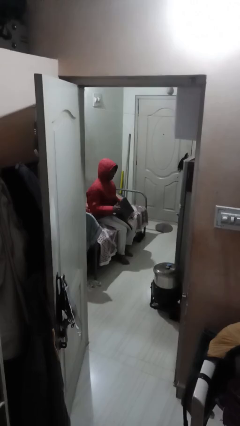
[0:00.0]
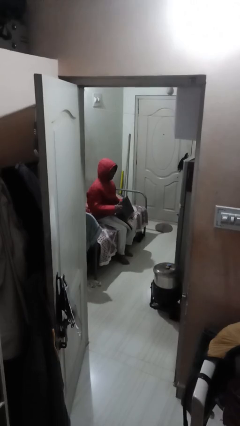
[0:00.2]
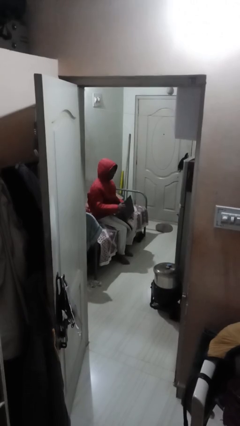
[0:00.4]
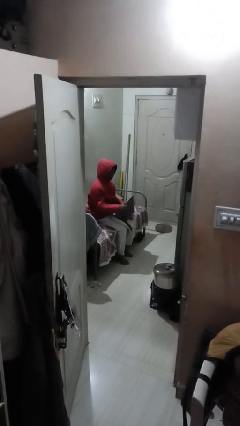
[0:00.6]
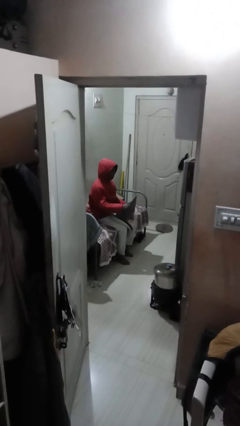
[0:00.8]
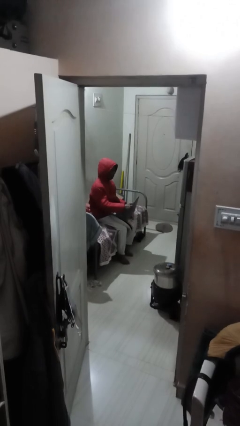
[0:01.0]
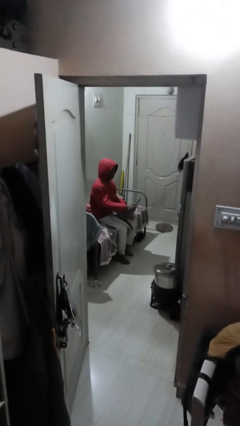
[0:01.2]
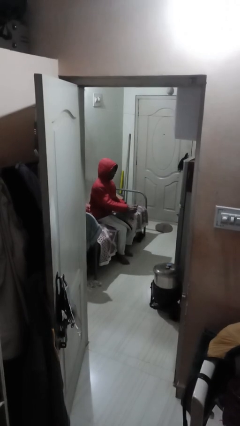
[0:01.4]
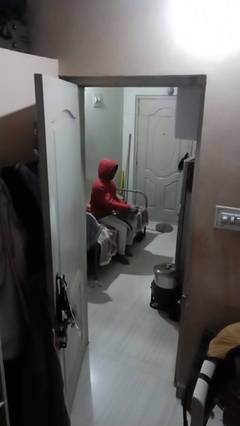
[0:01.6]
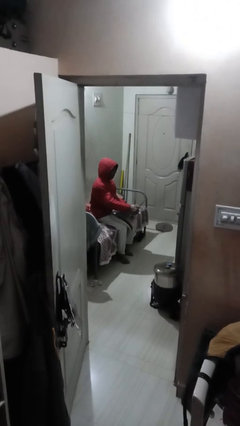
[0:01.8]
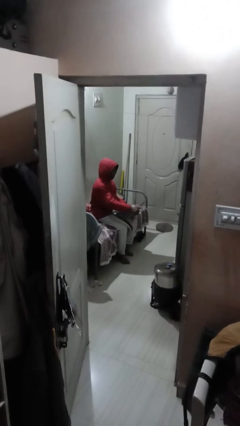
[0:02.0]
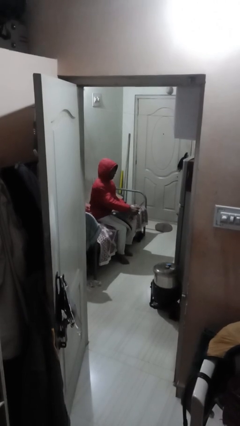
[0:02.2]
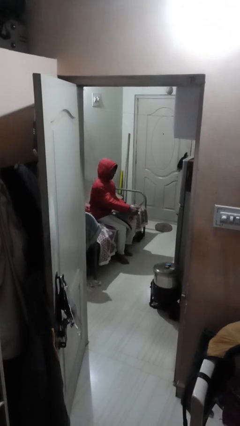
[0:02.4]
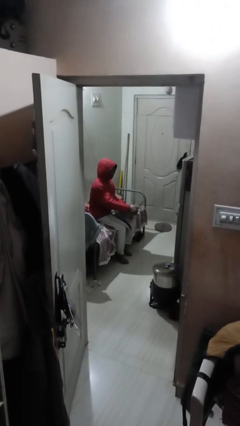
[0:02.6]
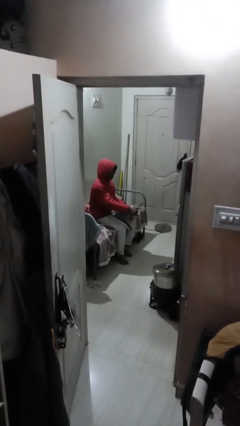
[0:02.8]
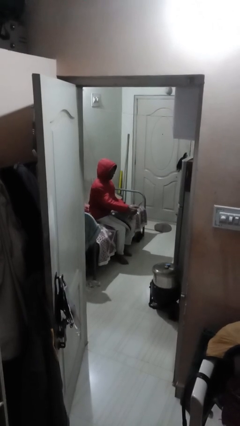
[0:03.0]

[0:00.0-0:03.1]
person interacts with laptop

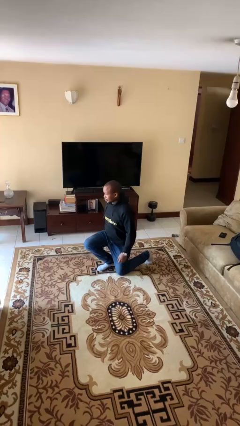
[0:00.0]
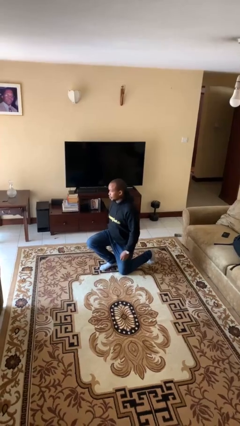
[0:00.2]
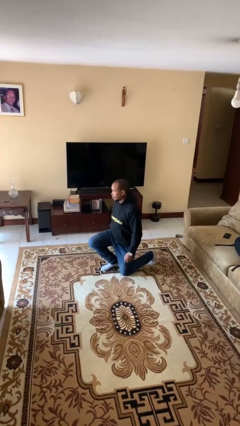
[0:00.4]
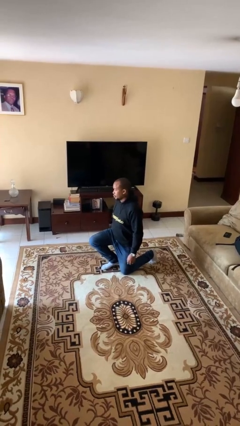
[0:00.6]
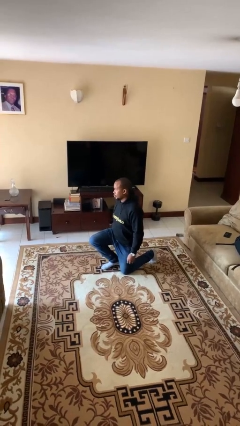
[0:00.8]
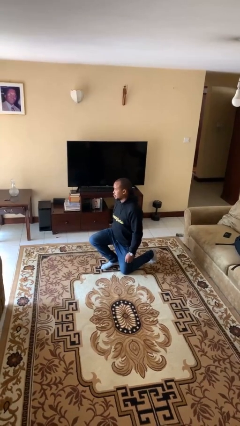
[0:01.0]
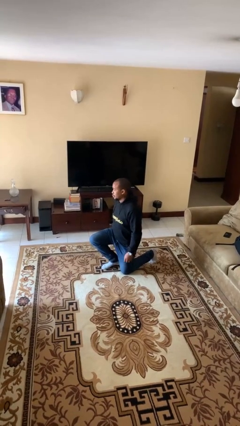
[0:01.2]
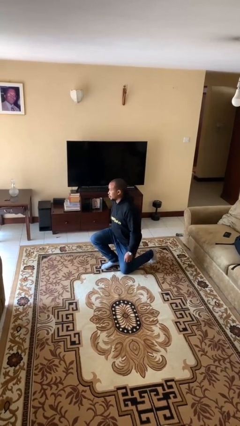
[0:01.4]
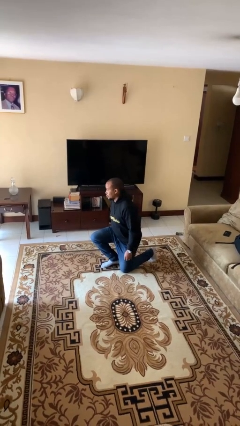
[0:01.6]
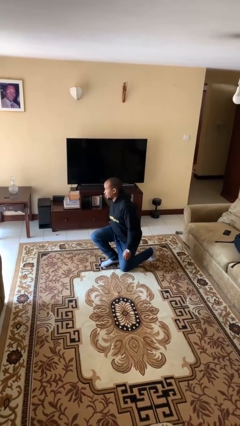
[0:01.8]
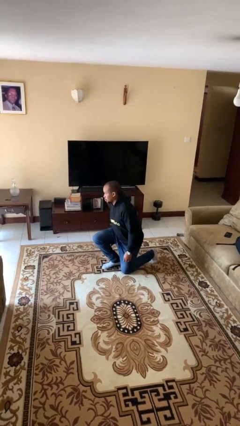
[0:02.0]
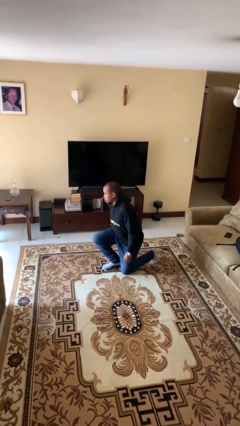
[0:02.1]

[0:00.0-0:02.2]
person kneels

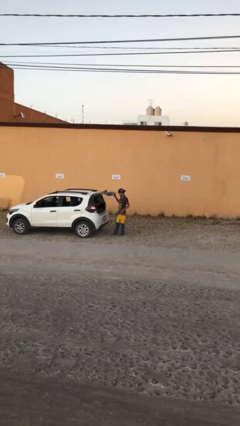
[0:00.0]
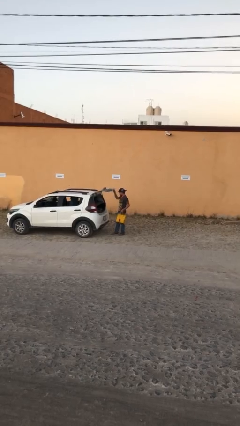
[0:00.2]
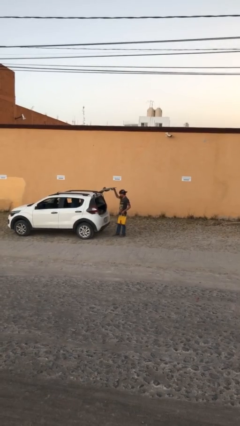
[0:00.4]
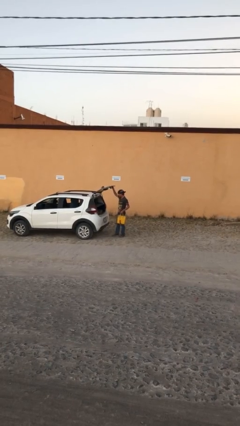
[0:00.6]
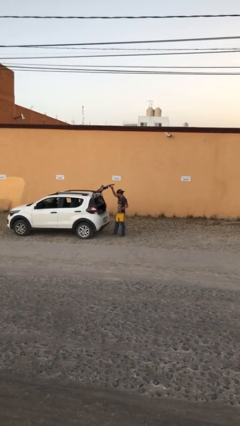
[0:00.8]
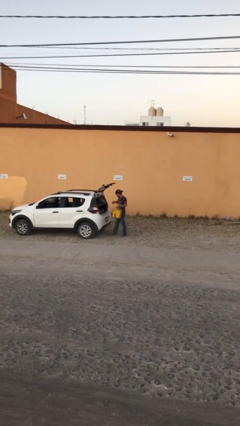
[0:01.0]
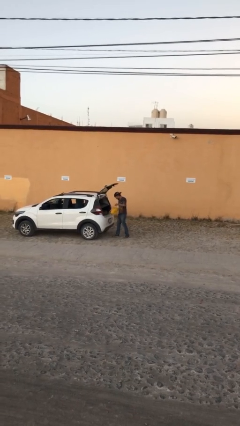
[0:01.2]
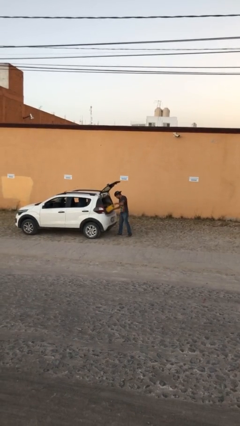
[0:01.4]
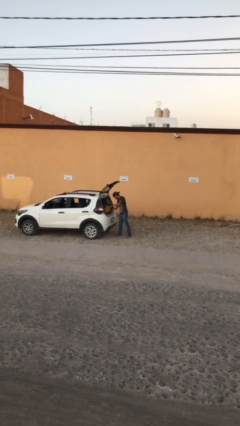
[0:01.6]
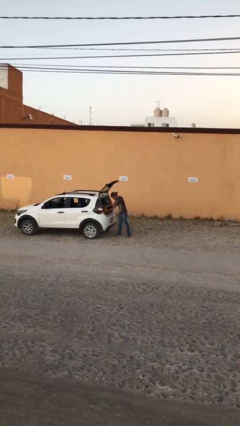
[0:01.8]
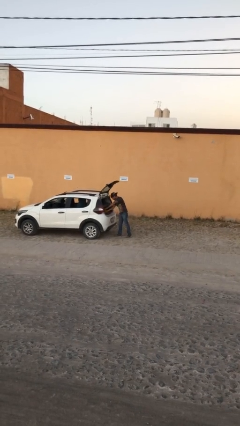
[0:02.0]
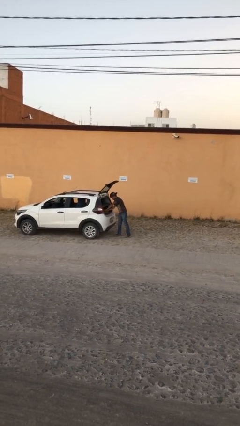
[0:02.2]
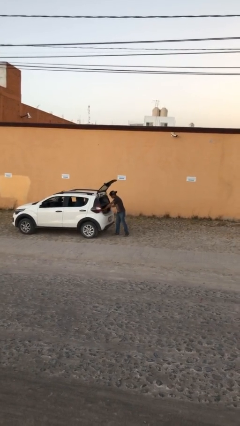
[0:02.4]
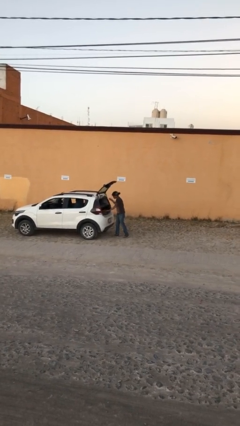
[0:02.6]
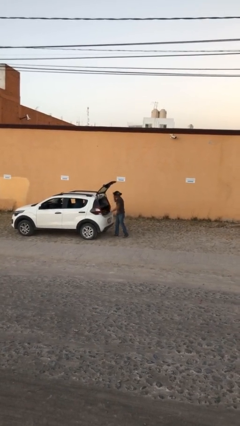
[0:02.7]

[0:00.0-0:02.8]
person loads car

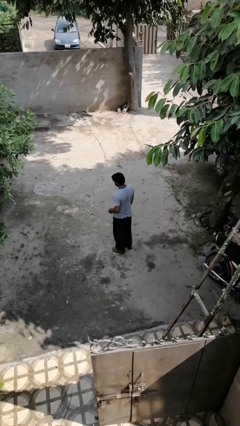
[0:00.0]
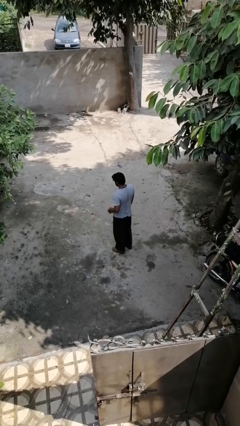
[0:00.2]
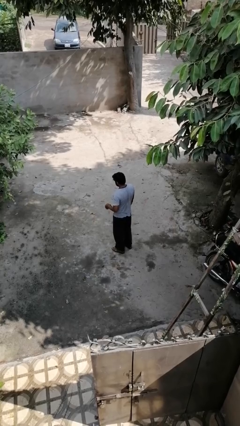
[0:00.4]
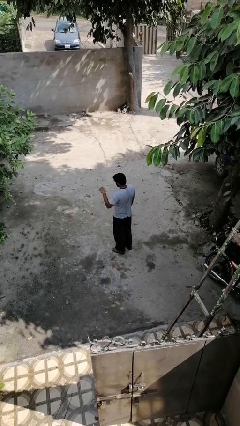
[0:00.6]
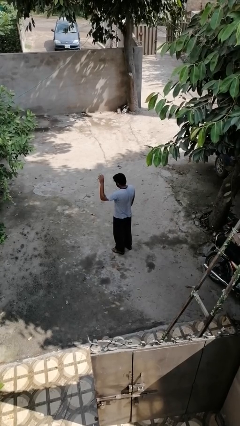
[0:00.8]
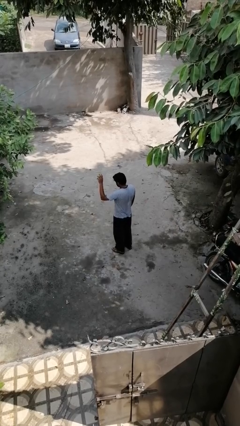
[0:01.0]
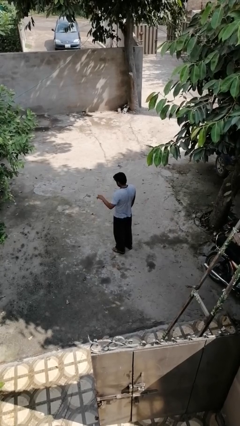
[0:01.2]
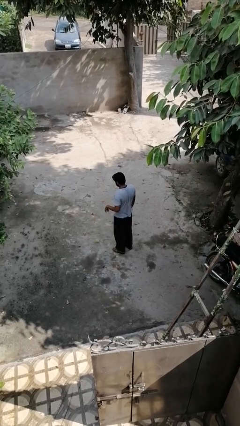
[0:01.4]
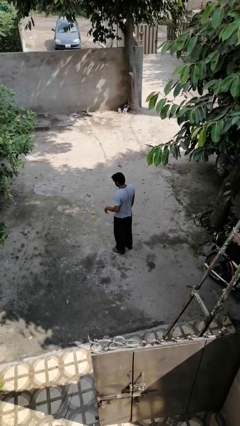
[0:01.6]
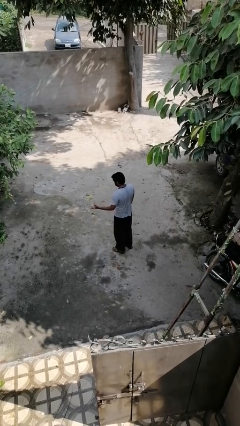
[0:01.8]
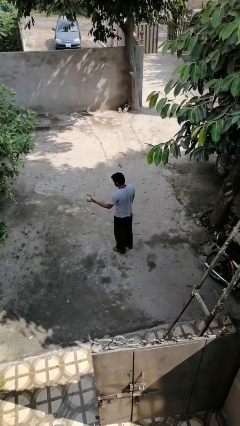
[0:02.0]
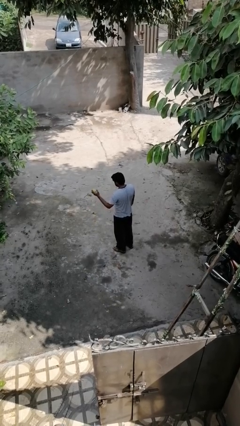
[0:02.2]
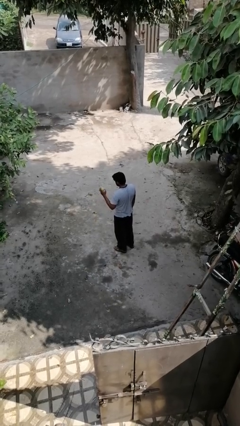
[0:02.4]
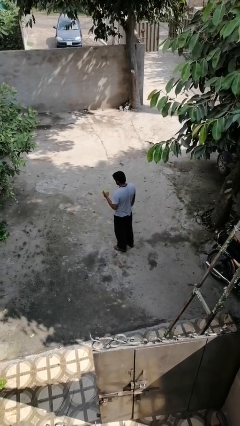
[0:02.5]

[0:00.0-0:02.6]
person bounces ball on floor

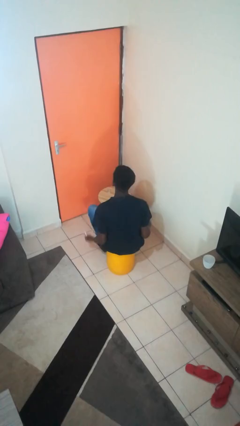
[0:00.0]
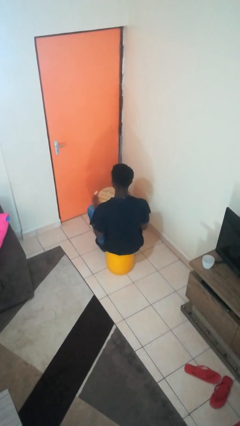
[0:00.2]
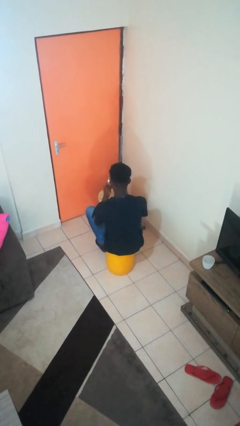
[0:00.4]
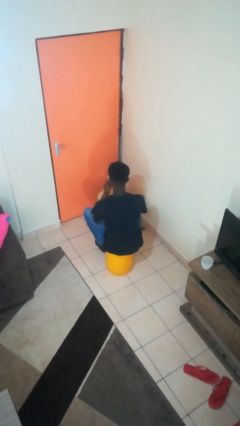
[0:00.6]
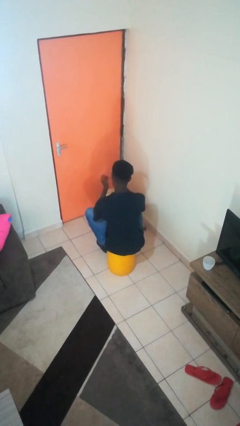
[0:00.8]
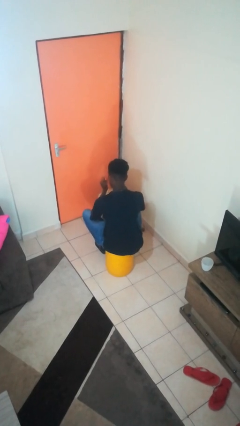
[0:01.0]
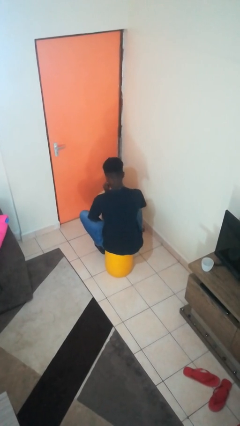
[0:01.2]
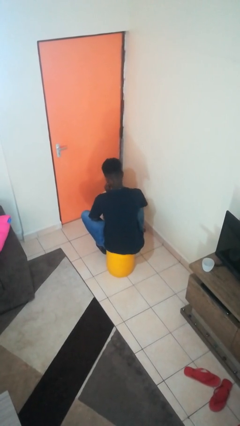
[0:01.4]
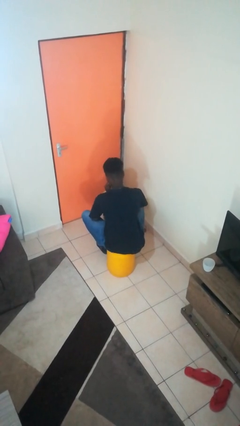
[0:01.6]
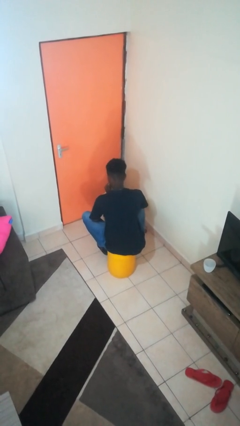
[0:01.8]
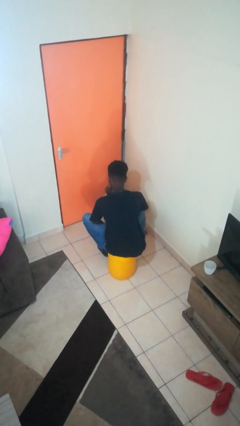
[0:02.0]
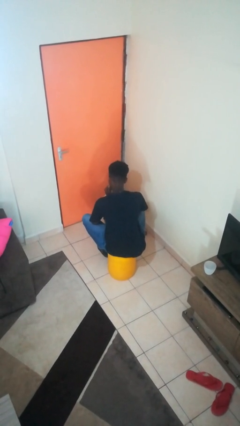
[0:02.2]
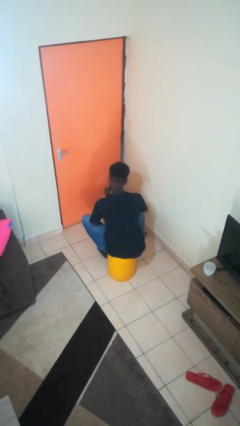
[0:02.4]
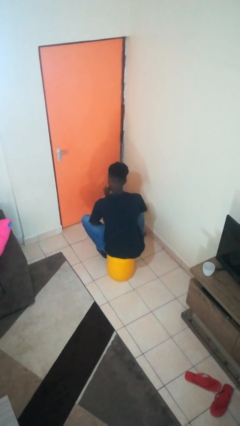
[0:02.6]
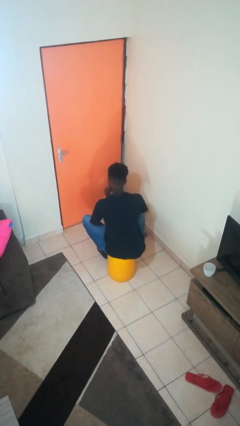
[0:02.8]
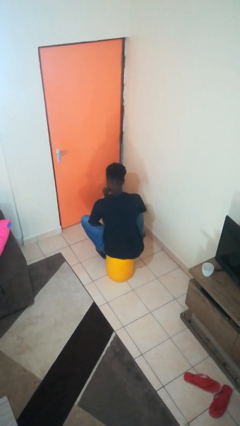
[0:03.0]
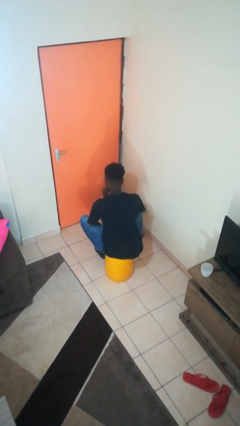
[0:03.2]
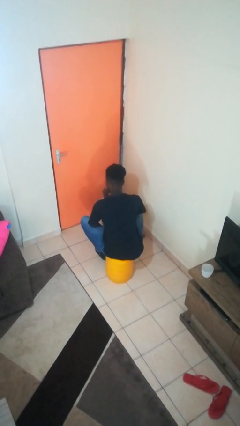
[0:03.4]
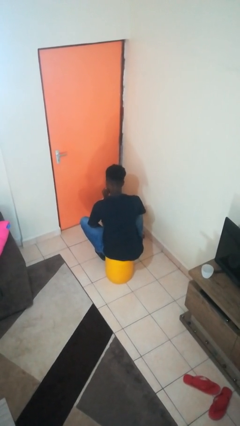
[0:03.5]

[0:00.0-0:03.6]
person paints fingernails

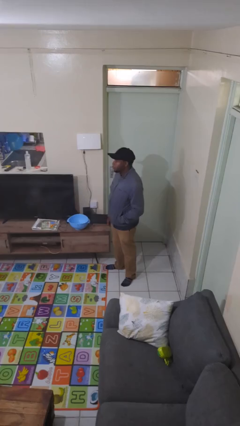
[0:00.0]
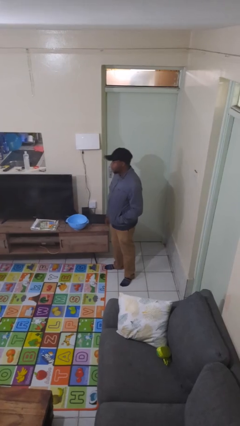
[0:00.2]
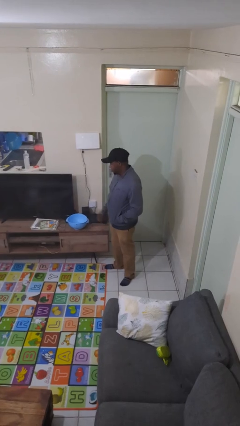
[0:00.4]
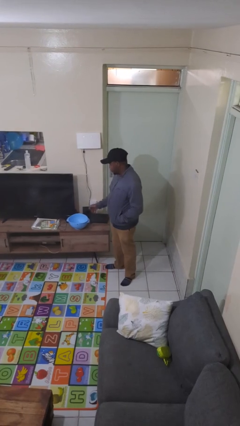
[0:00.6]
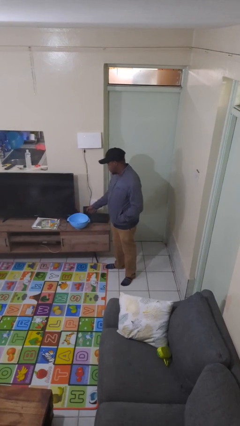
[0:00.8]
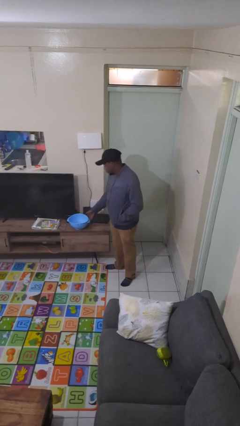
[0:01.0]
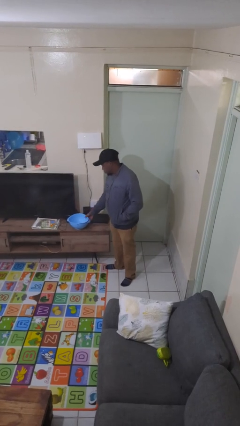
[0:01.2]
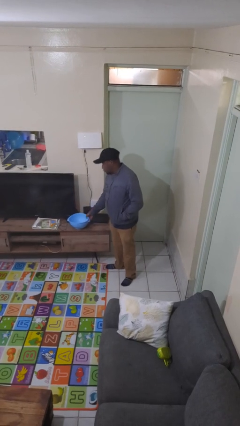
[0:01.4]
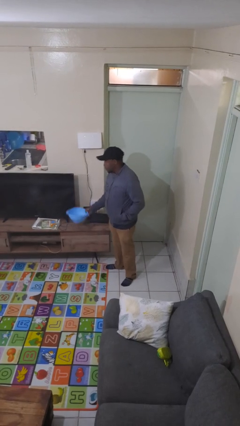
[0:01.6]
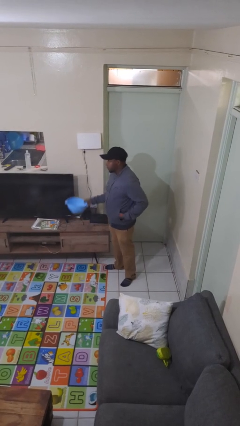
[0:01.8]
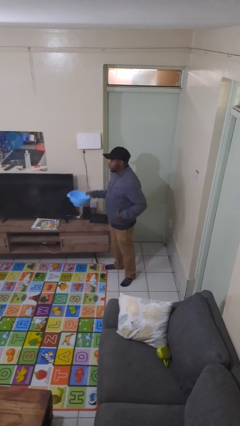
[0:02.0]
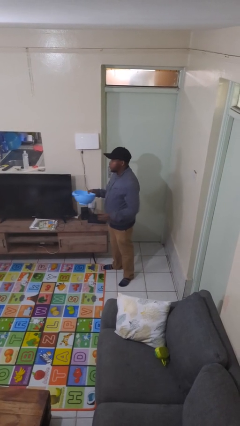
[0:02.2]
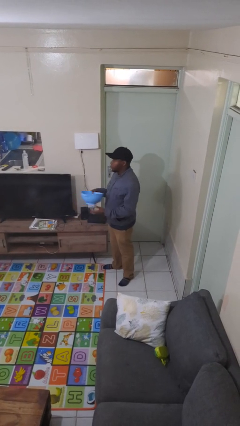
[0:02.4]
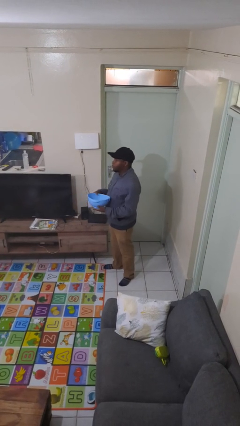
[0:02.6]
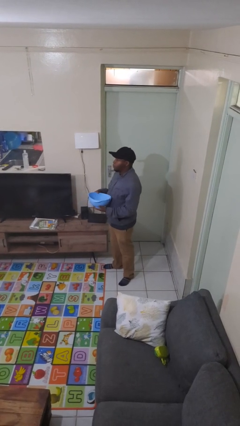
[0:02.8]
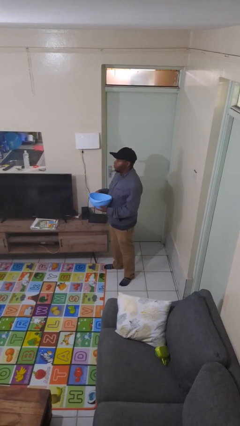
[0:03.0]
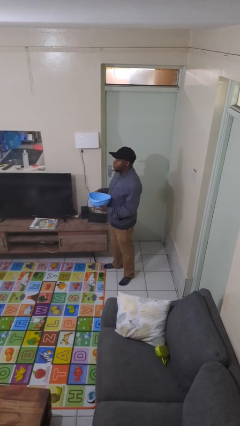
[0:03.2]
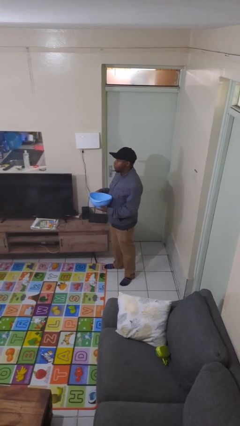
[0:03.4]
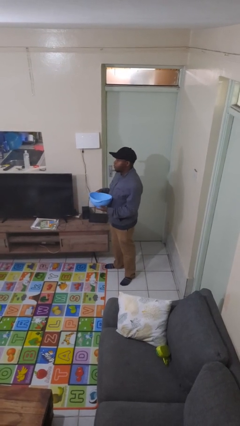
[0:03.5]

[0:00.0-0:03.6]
person picks up object from countertop
